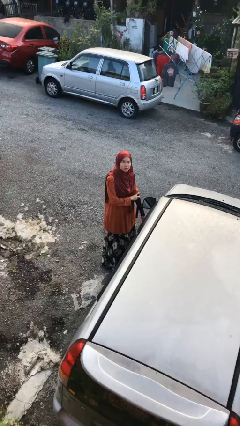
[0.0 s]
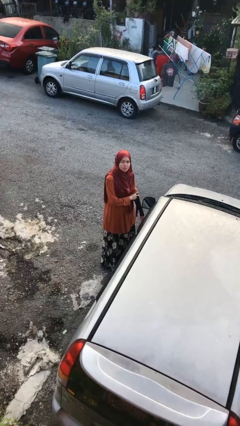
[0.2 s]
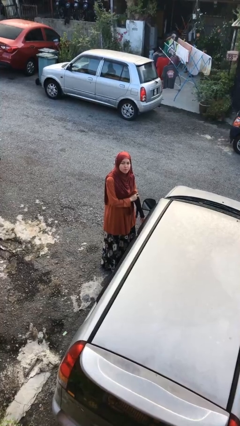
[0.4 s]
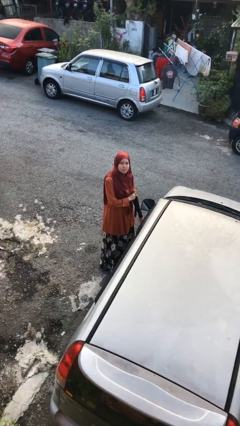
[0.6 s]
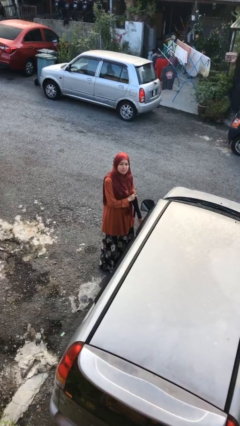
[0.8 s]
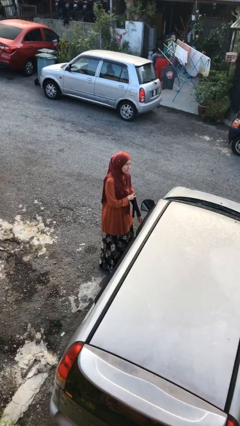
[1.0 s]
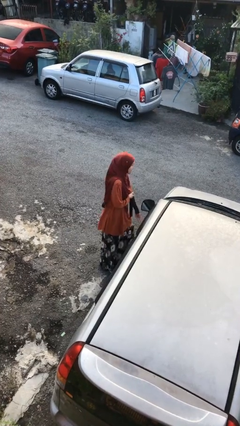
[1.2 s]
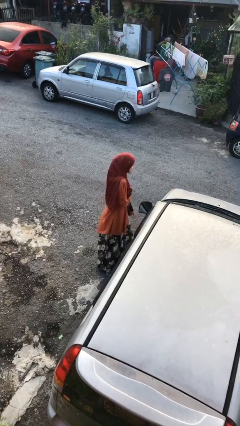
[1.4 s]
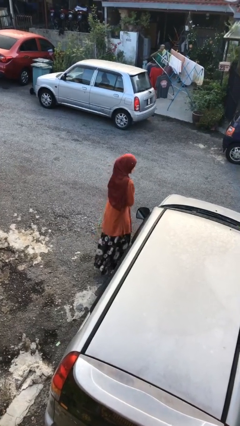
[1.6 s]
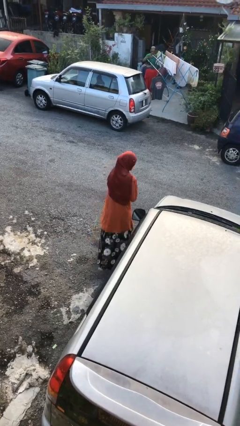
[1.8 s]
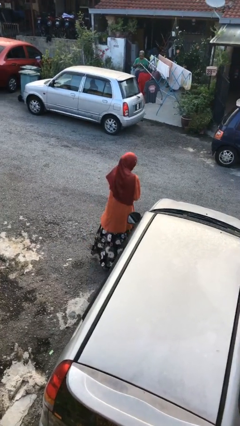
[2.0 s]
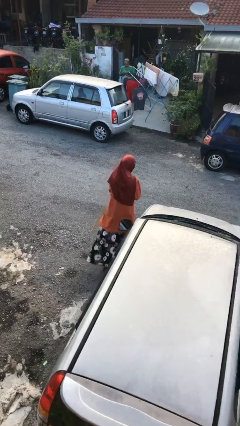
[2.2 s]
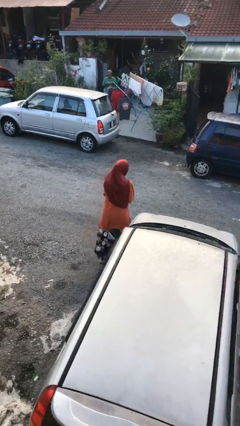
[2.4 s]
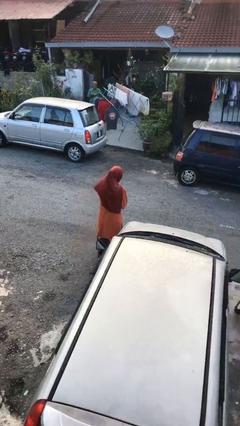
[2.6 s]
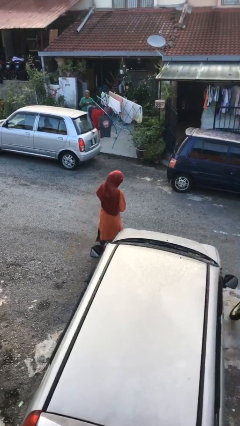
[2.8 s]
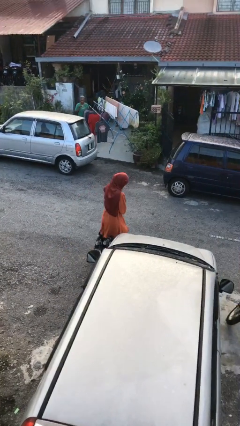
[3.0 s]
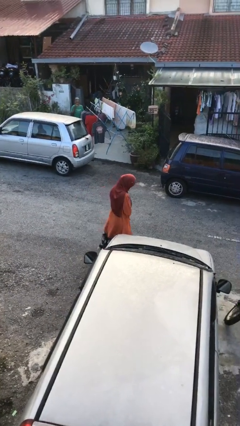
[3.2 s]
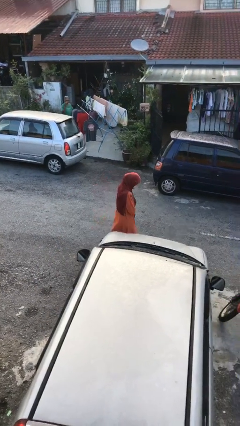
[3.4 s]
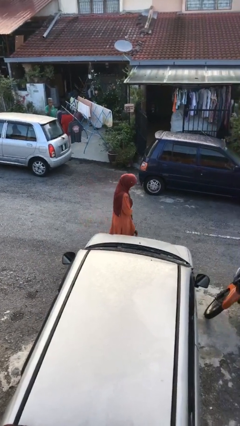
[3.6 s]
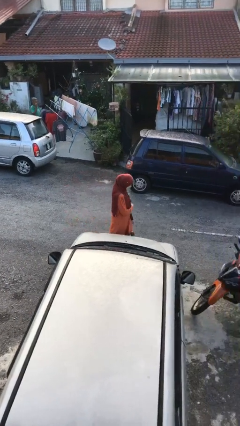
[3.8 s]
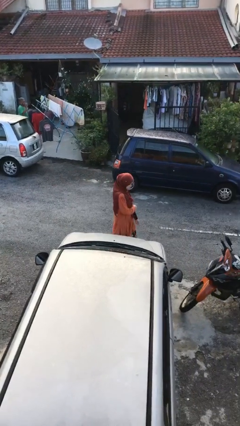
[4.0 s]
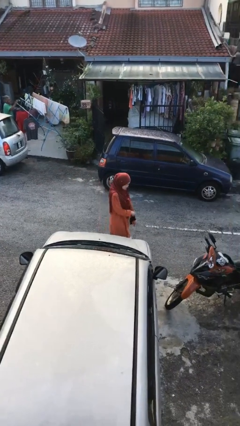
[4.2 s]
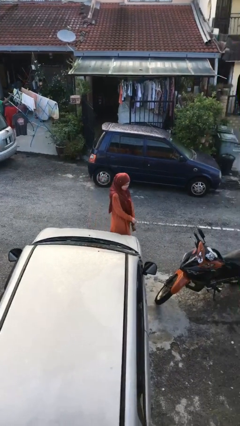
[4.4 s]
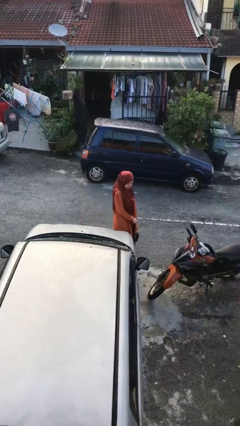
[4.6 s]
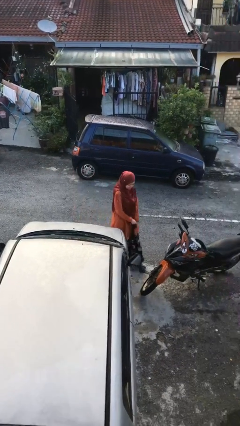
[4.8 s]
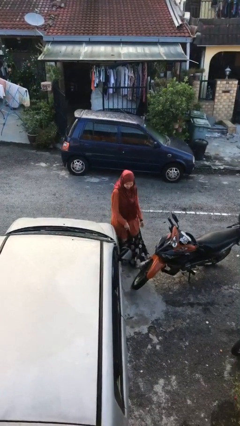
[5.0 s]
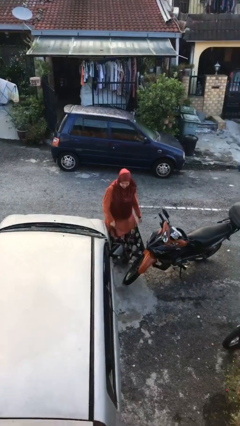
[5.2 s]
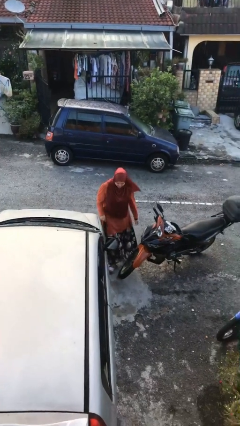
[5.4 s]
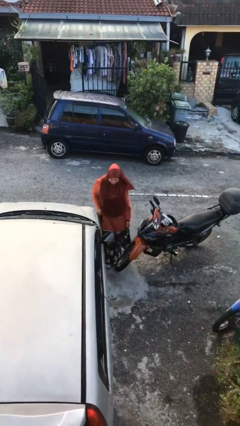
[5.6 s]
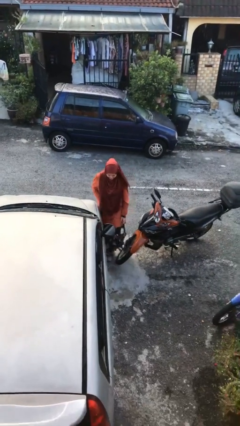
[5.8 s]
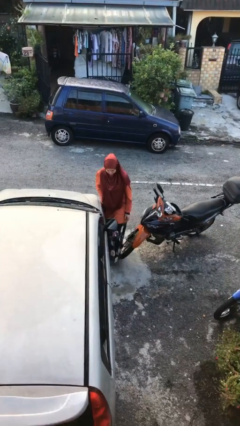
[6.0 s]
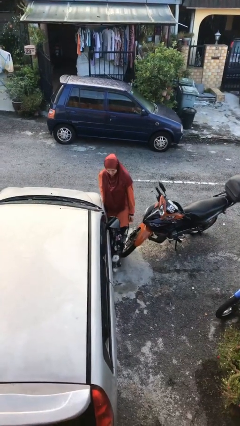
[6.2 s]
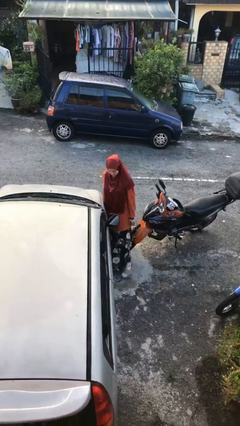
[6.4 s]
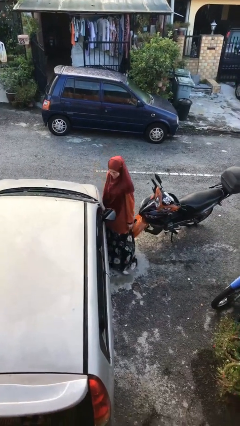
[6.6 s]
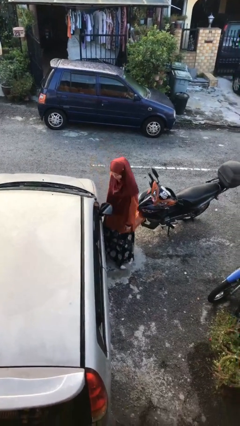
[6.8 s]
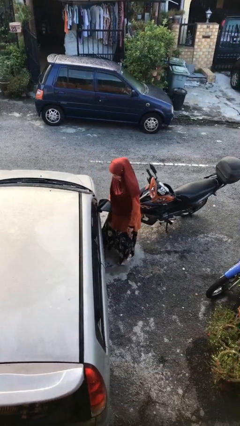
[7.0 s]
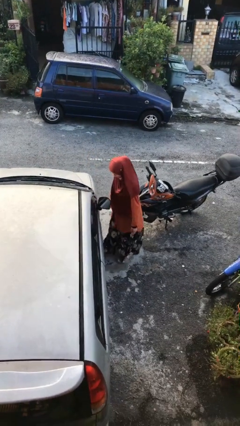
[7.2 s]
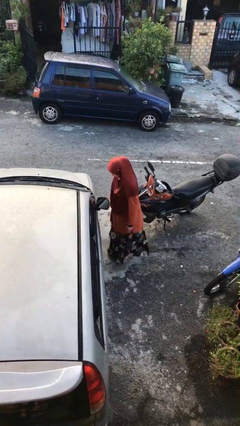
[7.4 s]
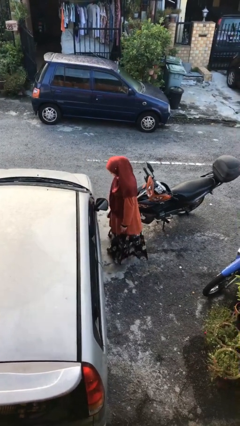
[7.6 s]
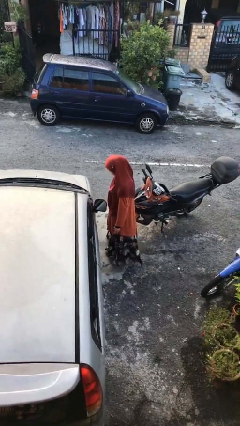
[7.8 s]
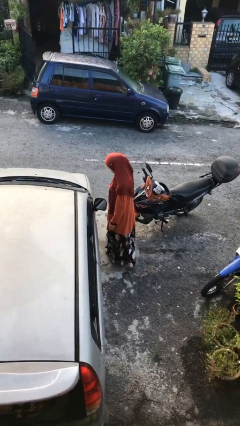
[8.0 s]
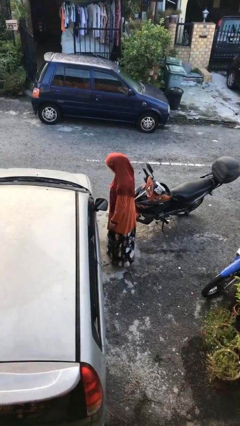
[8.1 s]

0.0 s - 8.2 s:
person walks around car

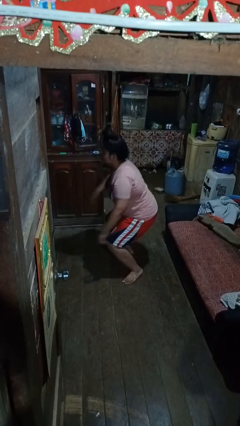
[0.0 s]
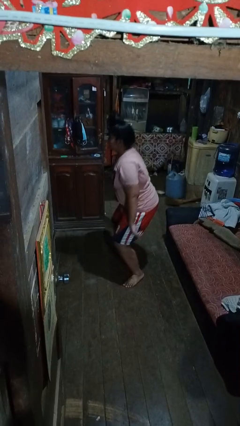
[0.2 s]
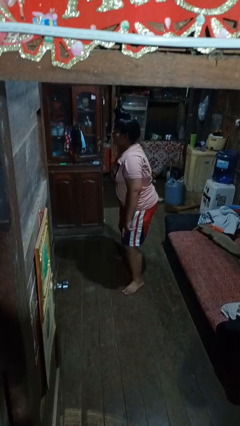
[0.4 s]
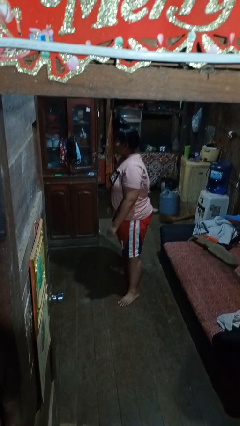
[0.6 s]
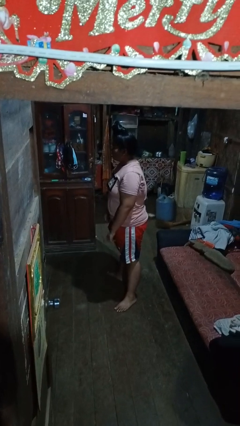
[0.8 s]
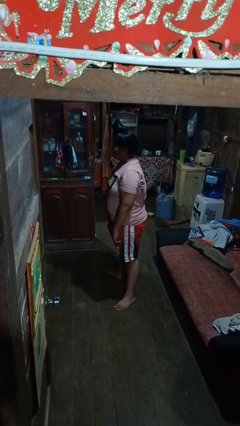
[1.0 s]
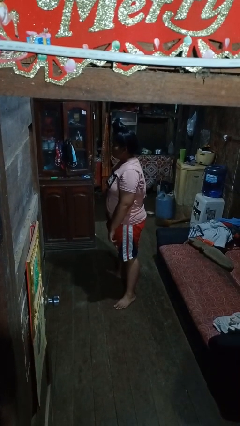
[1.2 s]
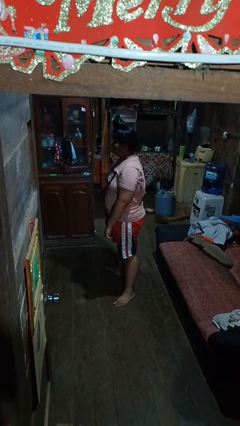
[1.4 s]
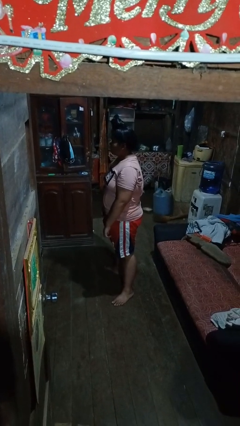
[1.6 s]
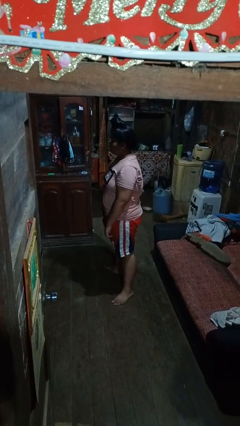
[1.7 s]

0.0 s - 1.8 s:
person stands up

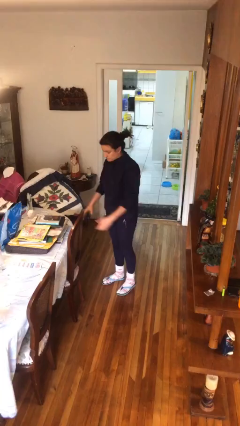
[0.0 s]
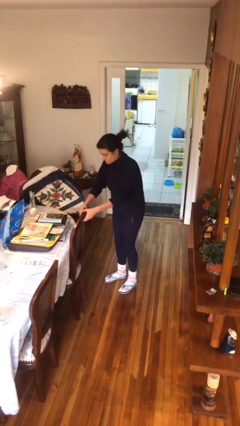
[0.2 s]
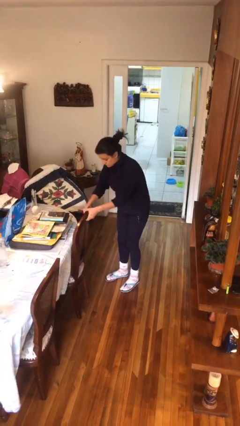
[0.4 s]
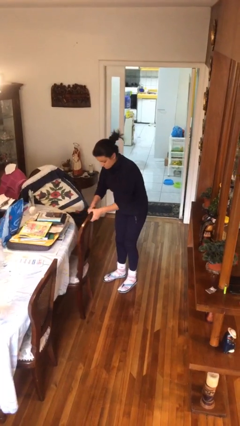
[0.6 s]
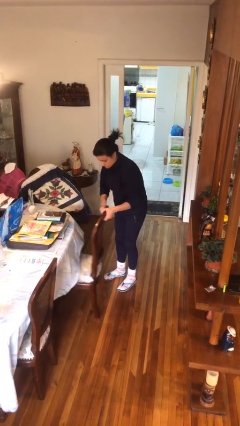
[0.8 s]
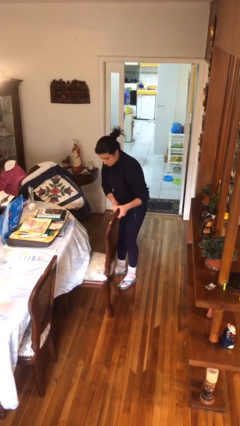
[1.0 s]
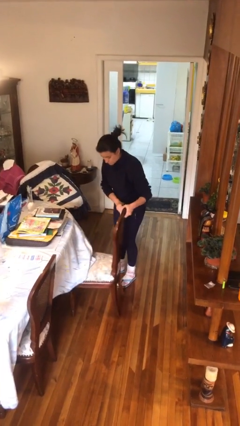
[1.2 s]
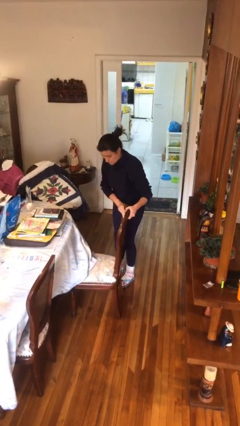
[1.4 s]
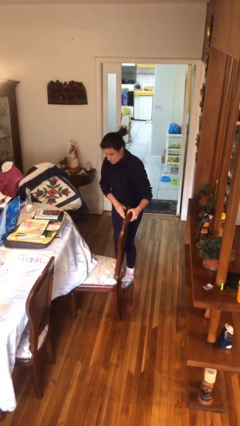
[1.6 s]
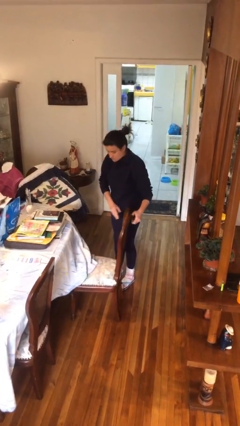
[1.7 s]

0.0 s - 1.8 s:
person pulls out chair

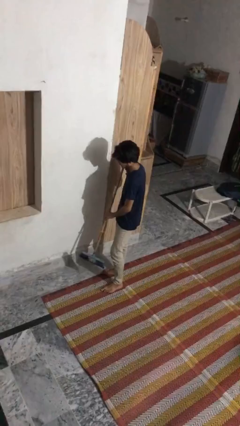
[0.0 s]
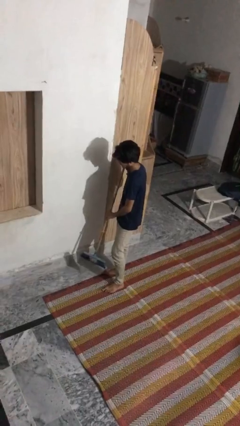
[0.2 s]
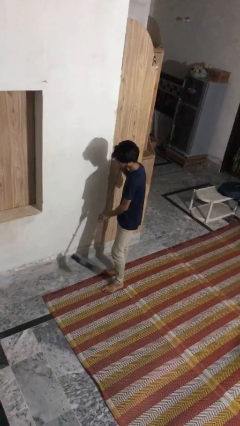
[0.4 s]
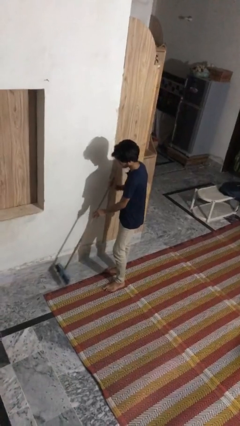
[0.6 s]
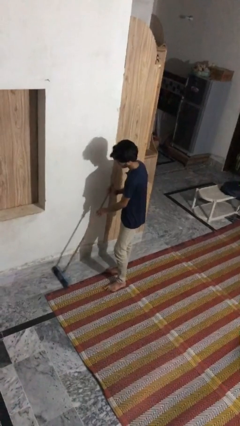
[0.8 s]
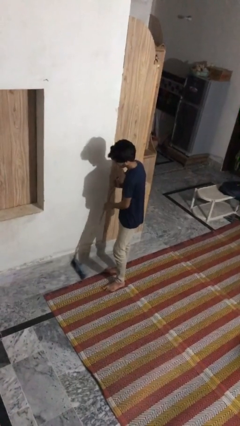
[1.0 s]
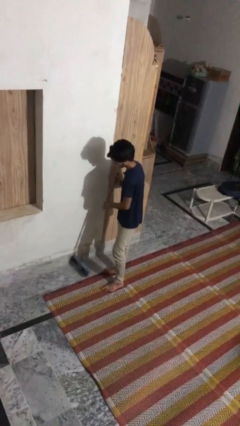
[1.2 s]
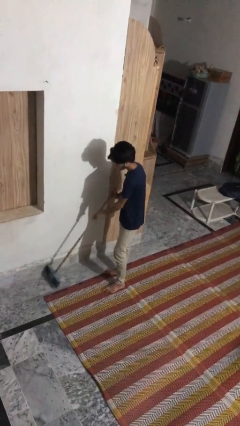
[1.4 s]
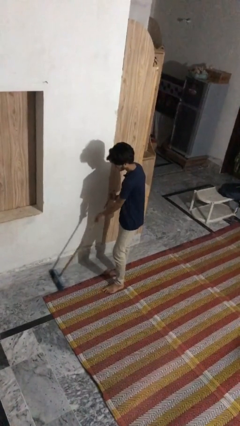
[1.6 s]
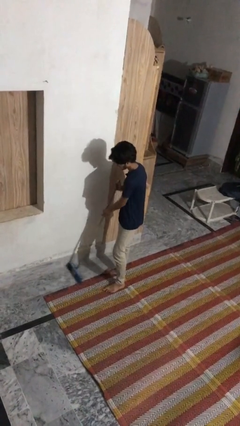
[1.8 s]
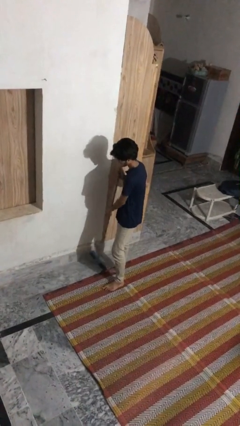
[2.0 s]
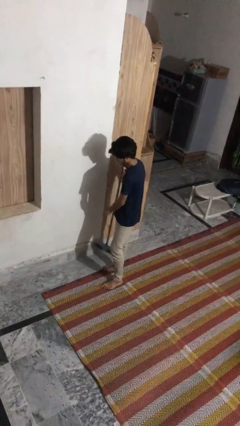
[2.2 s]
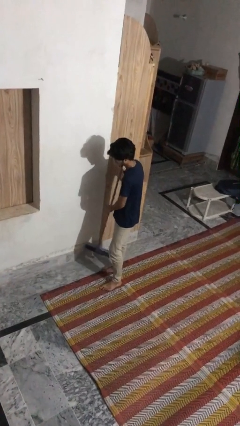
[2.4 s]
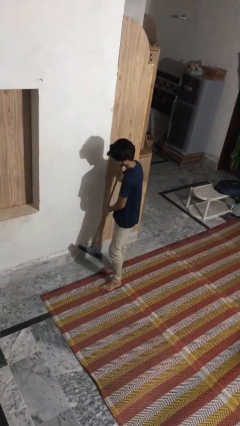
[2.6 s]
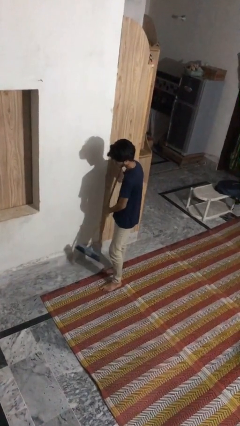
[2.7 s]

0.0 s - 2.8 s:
person sweeps floor

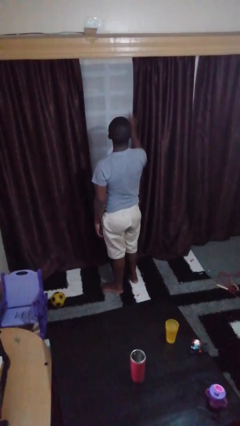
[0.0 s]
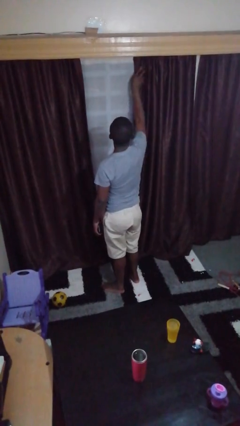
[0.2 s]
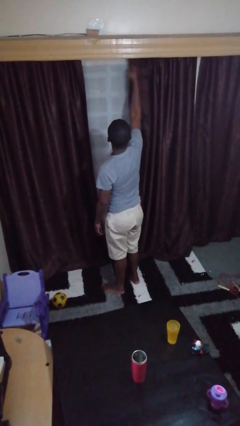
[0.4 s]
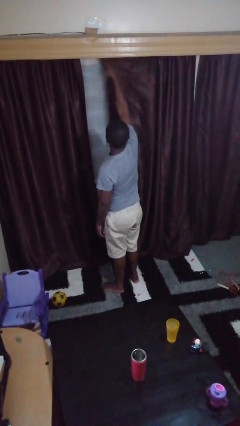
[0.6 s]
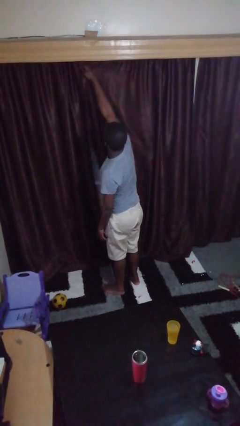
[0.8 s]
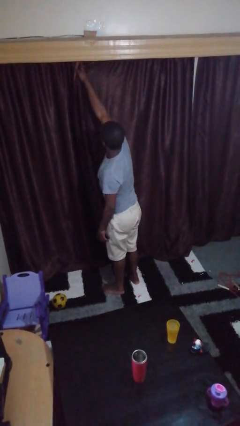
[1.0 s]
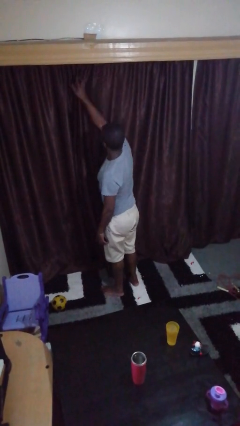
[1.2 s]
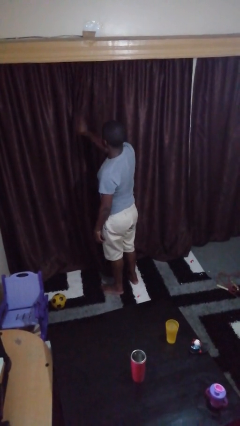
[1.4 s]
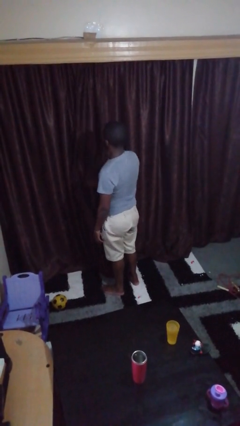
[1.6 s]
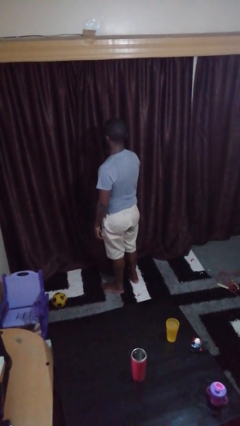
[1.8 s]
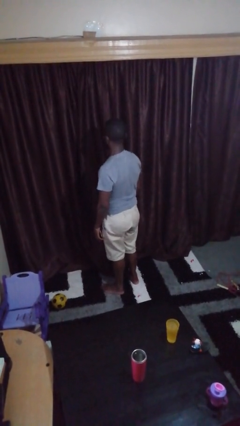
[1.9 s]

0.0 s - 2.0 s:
person closes curtains

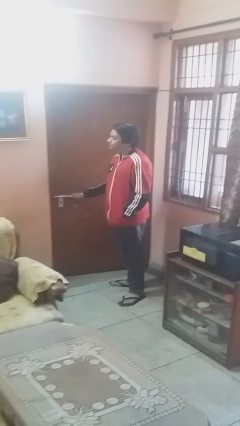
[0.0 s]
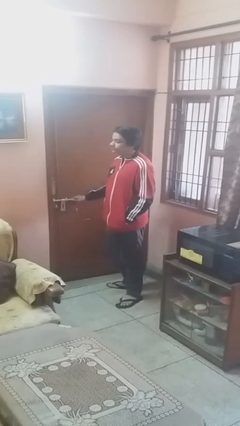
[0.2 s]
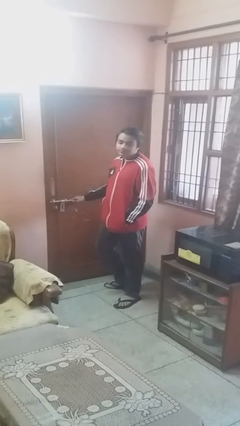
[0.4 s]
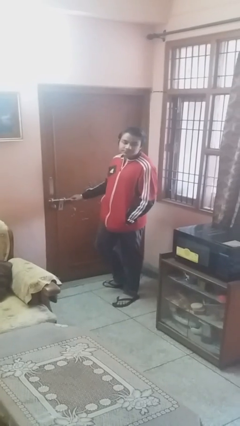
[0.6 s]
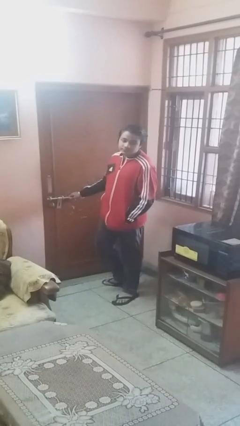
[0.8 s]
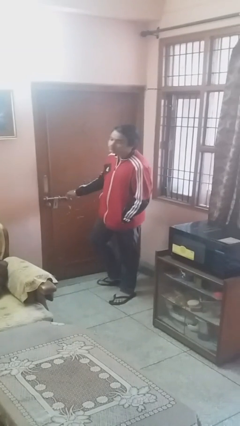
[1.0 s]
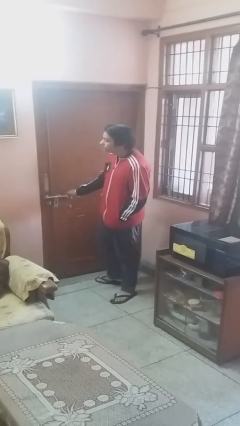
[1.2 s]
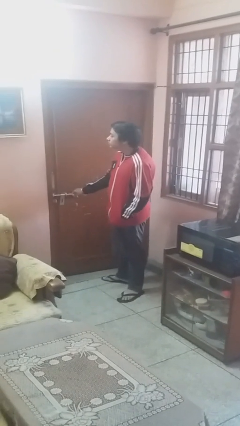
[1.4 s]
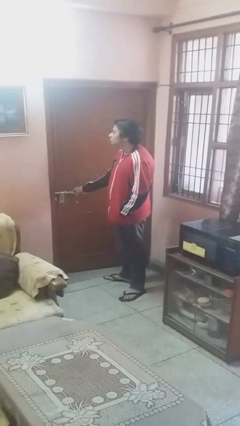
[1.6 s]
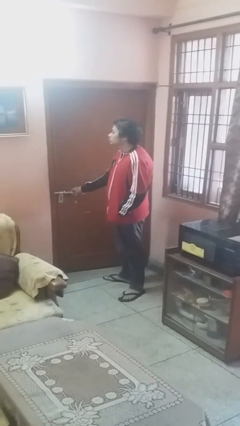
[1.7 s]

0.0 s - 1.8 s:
person closes facility door
